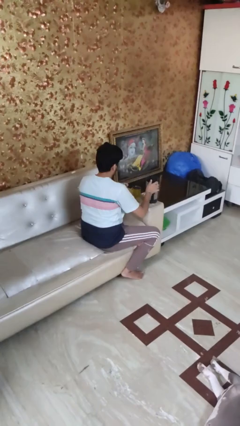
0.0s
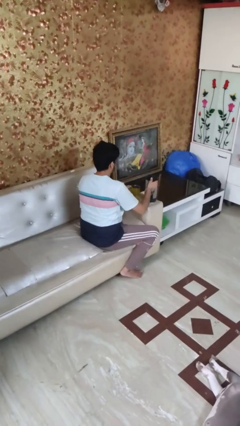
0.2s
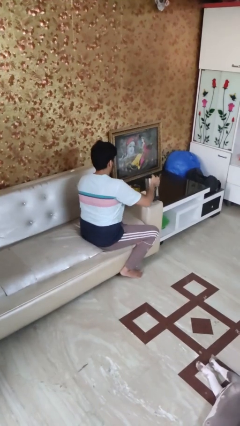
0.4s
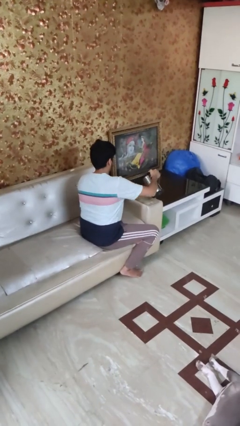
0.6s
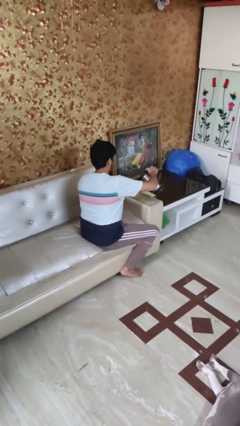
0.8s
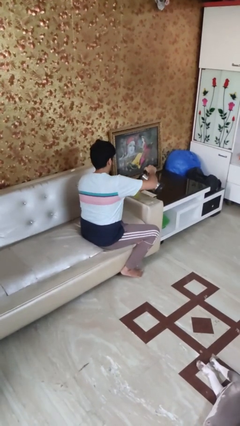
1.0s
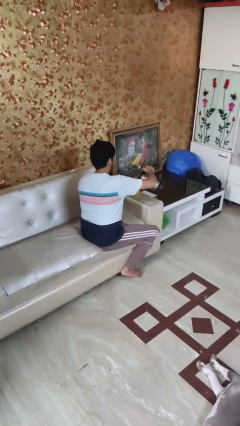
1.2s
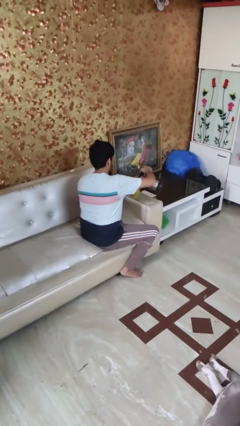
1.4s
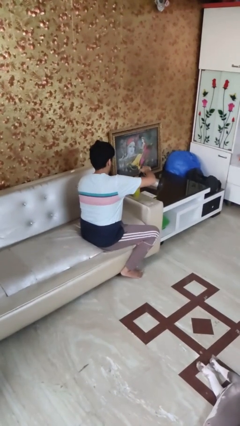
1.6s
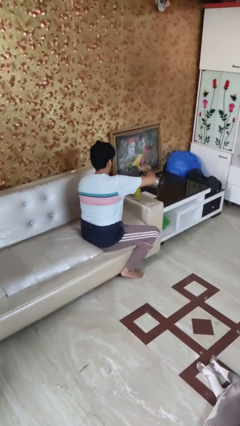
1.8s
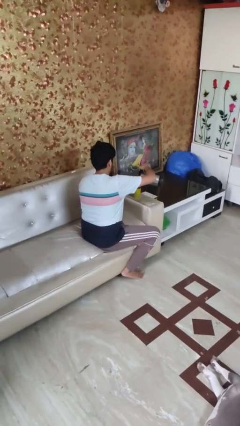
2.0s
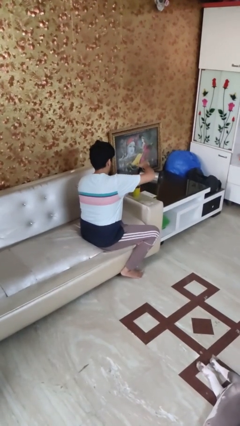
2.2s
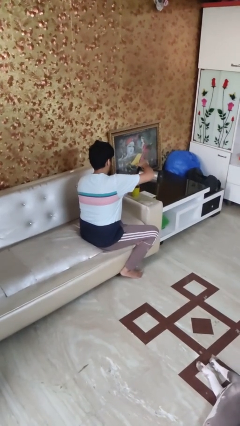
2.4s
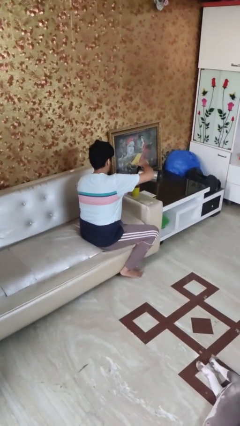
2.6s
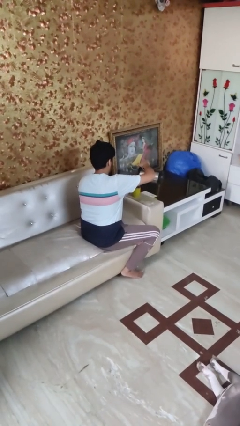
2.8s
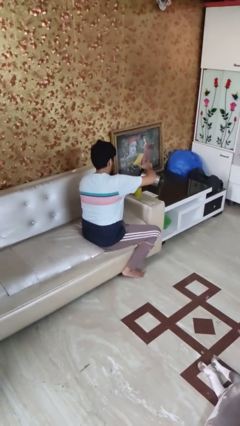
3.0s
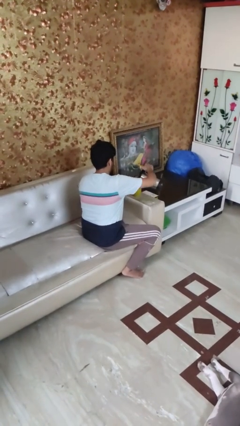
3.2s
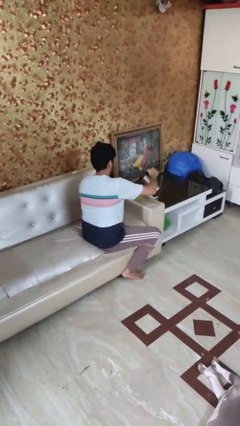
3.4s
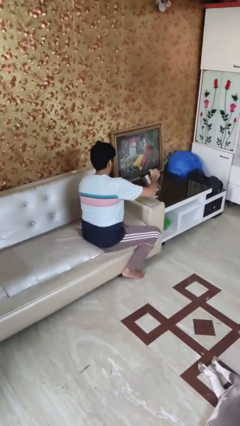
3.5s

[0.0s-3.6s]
person pours coffee into mug

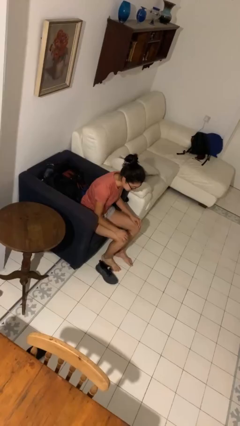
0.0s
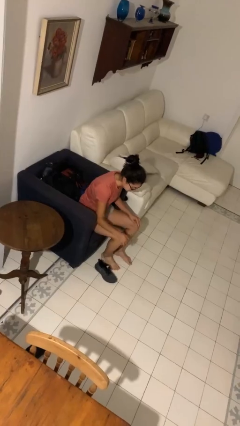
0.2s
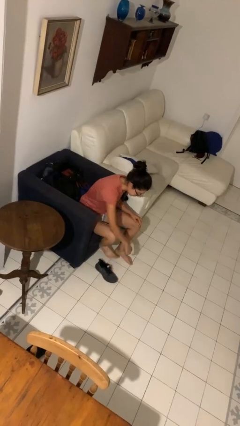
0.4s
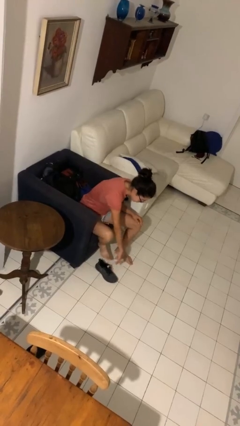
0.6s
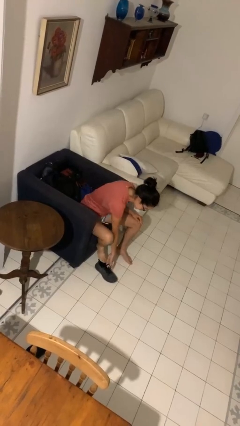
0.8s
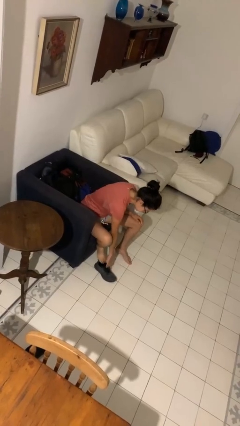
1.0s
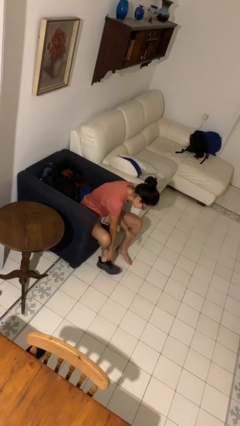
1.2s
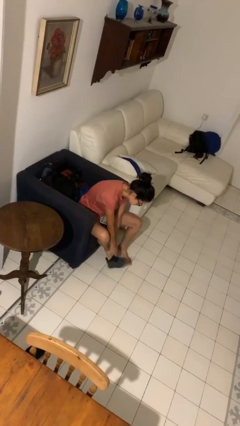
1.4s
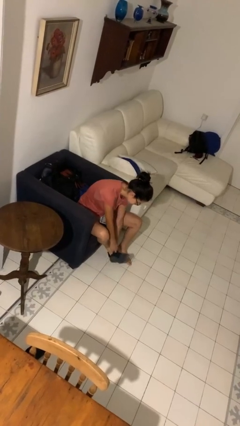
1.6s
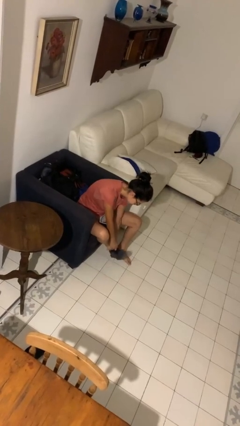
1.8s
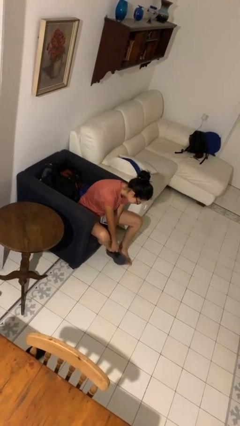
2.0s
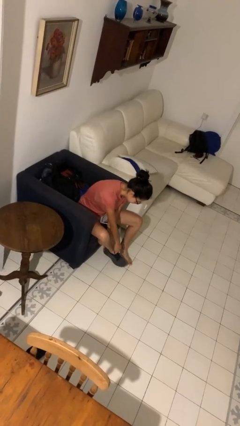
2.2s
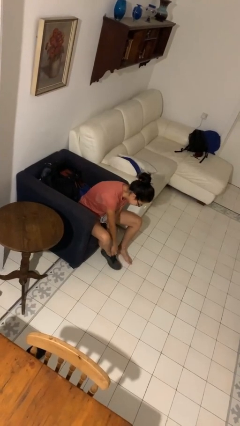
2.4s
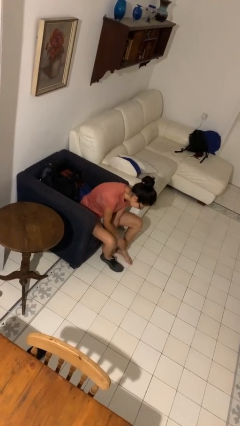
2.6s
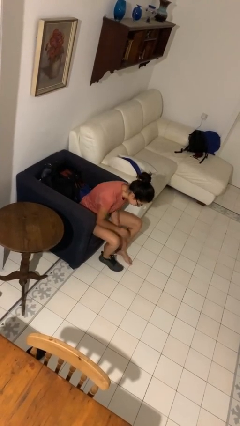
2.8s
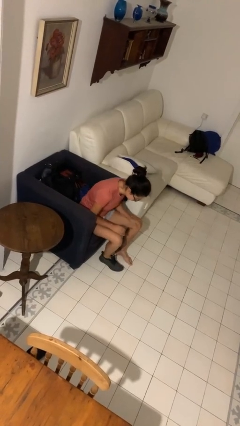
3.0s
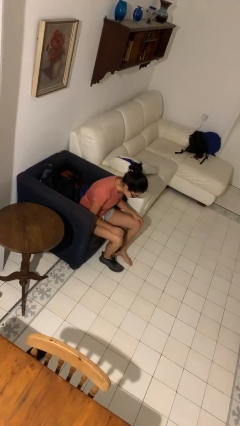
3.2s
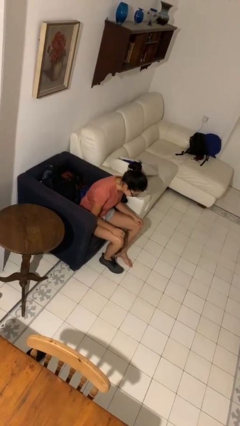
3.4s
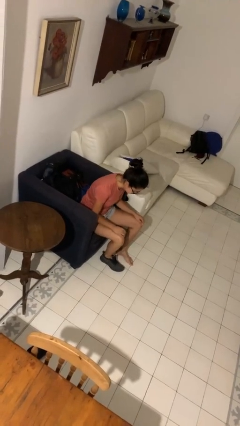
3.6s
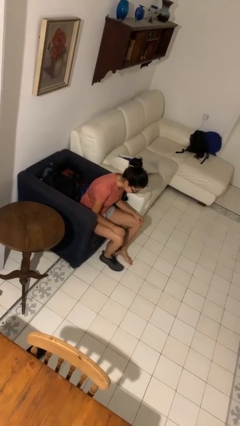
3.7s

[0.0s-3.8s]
person puts on shoes

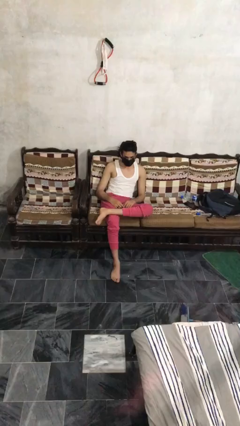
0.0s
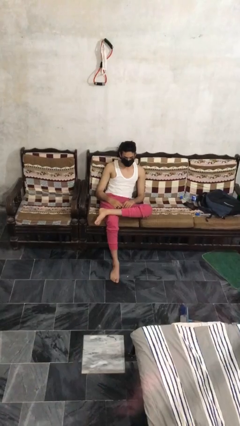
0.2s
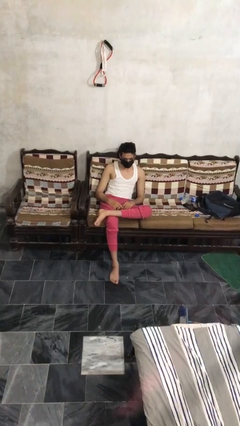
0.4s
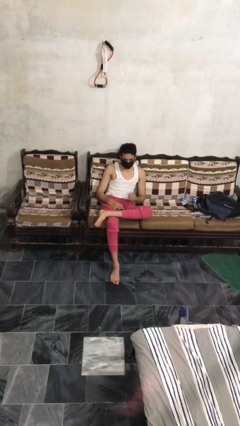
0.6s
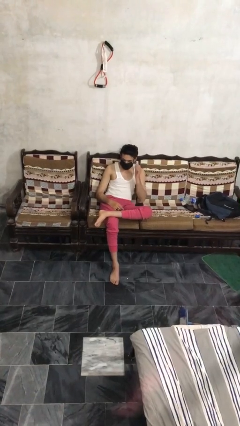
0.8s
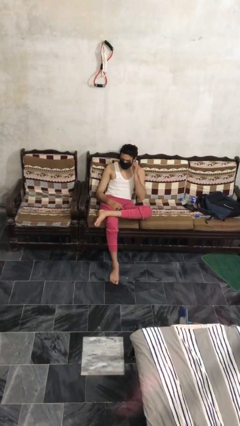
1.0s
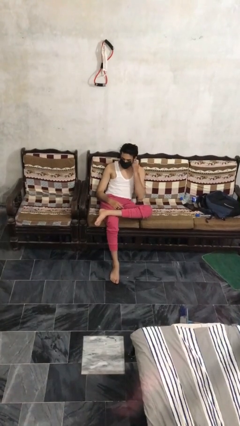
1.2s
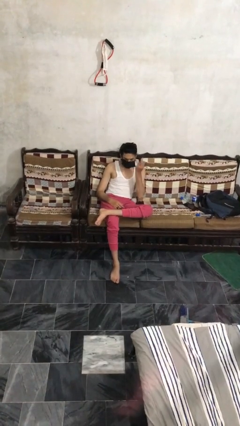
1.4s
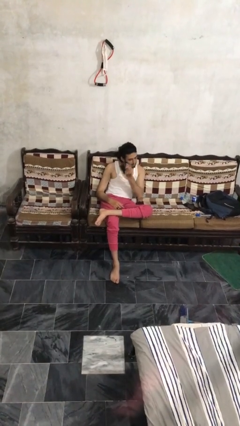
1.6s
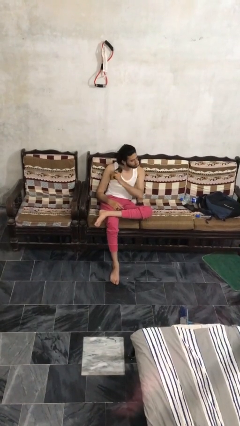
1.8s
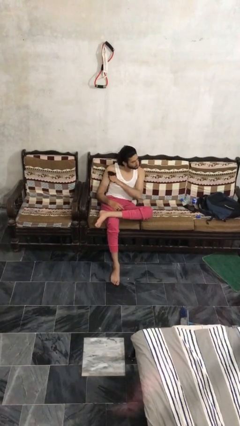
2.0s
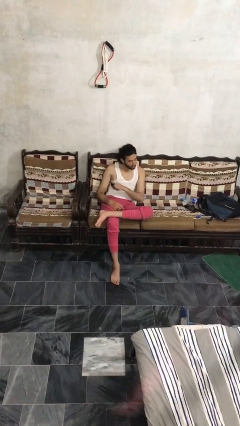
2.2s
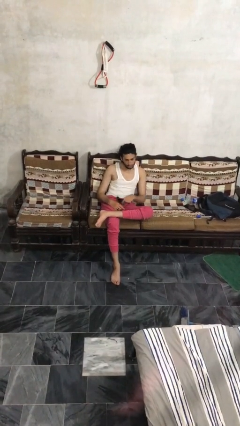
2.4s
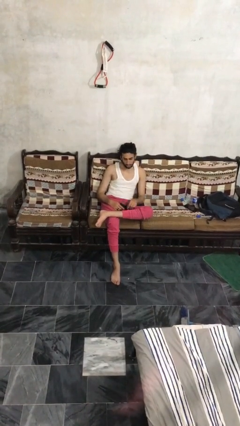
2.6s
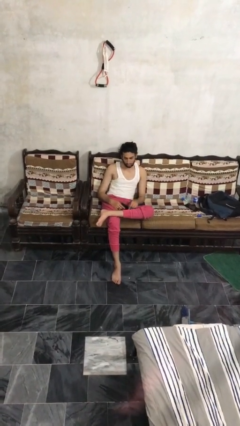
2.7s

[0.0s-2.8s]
person takes off facemask

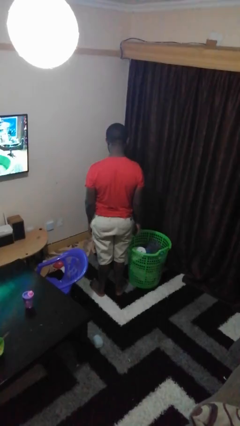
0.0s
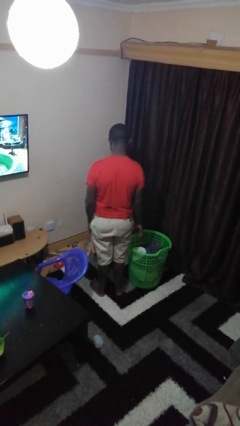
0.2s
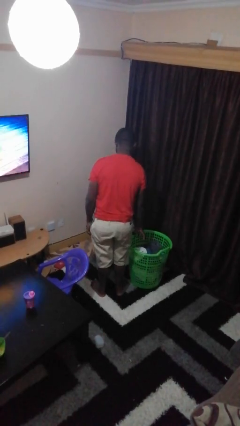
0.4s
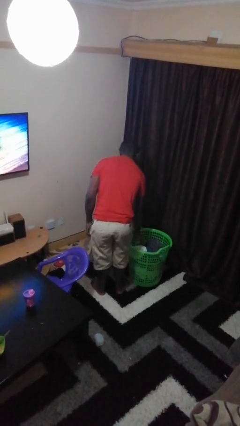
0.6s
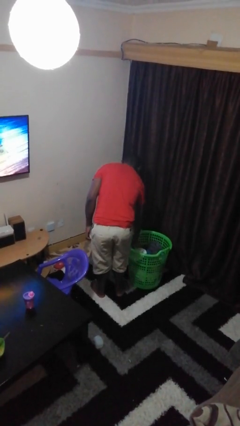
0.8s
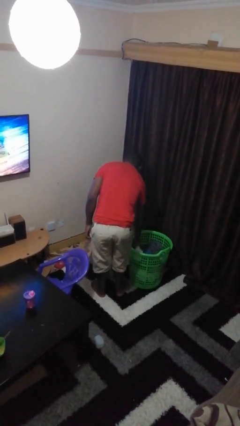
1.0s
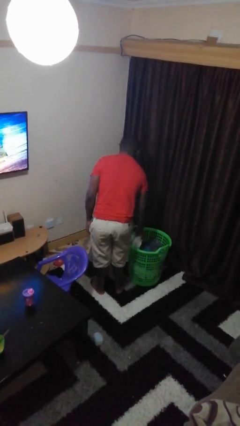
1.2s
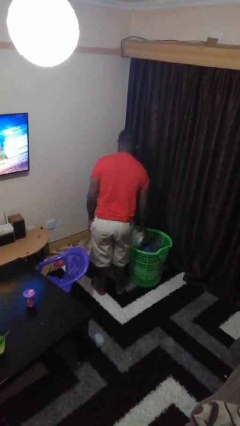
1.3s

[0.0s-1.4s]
person takes object from basket

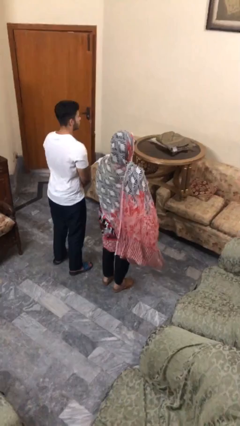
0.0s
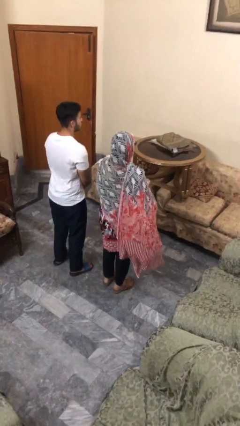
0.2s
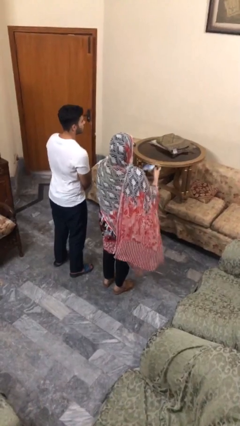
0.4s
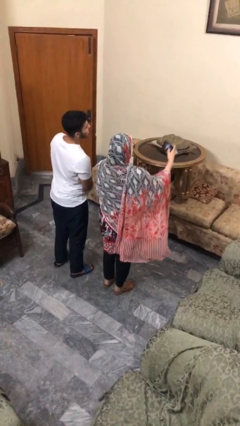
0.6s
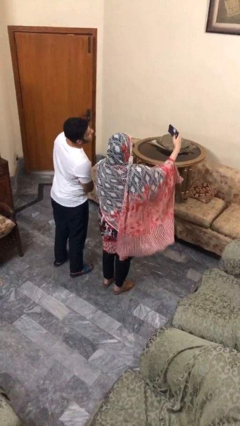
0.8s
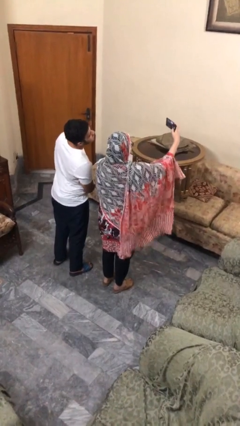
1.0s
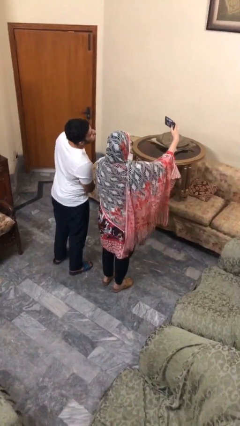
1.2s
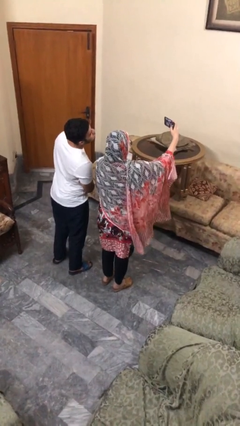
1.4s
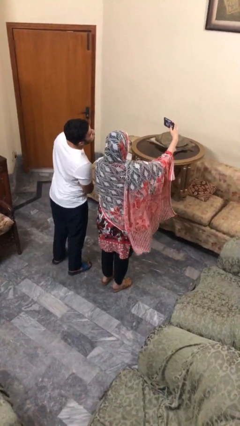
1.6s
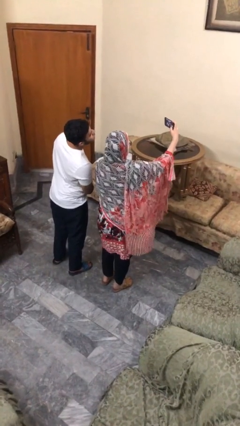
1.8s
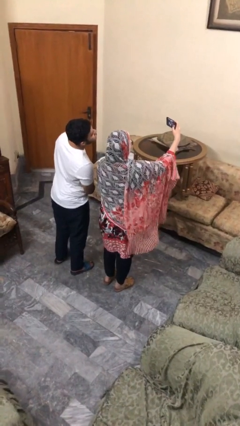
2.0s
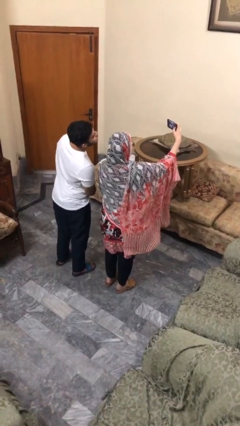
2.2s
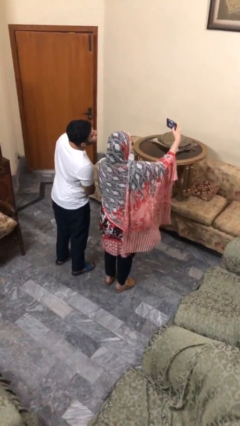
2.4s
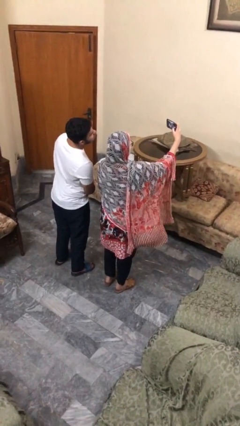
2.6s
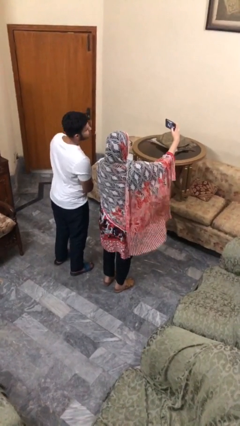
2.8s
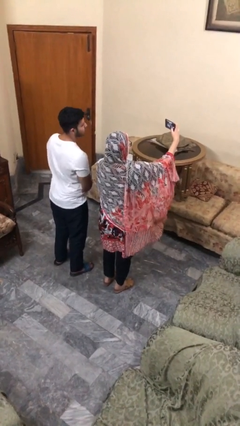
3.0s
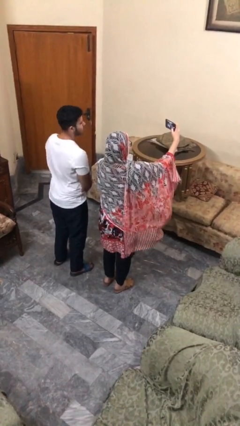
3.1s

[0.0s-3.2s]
person takes selfie with person

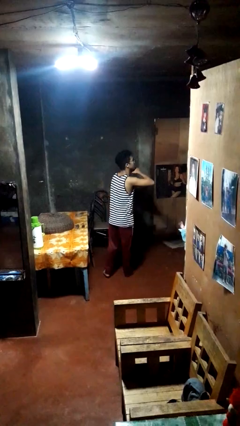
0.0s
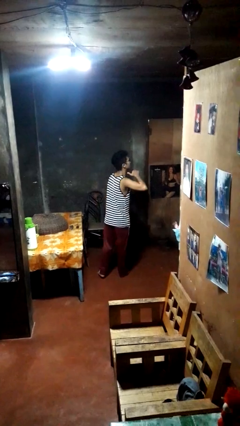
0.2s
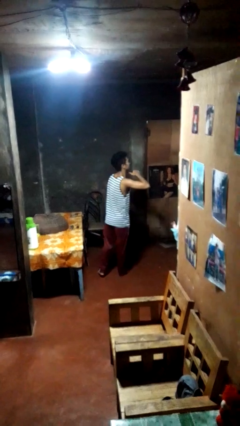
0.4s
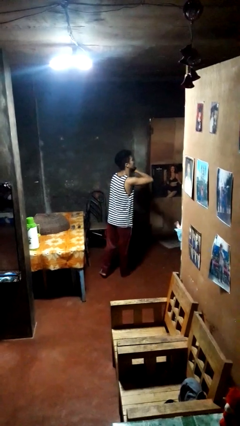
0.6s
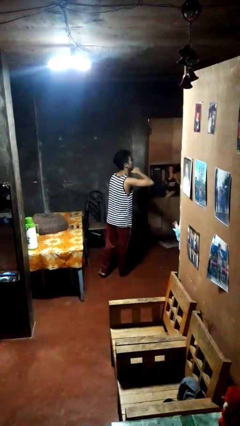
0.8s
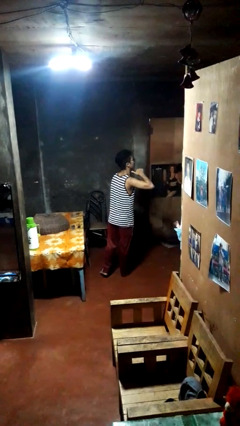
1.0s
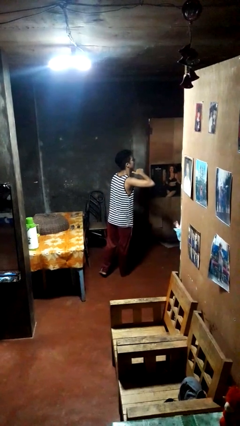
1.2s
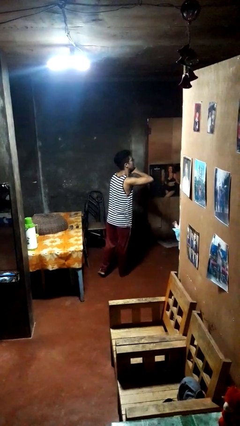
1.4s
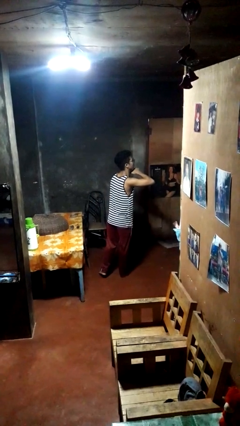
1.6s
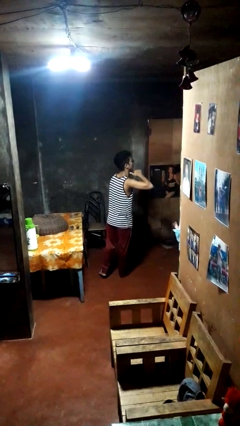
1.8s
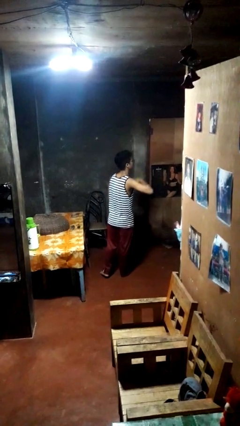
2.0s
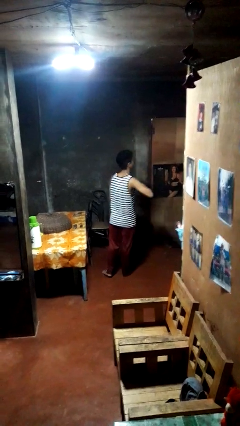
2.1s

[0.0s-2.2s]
person gestures cut

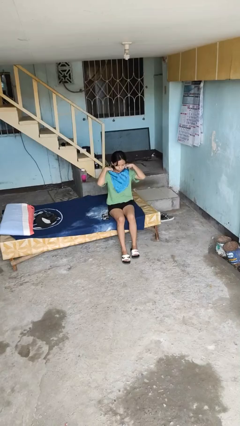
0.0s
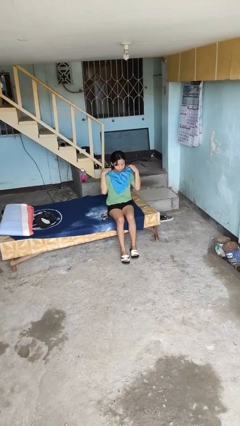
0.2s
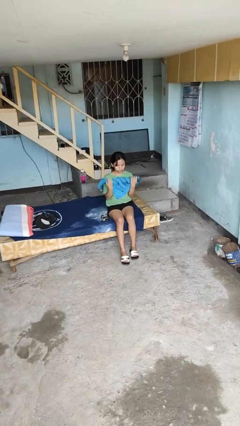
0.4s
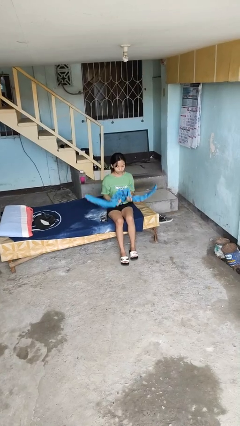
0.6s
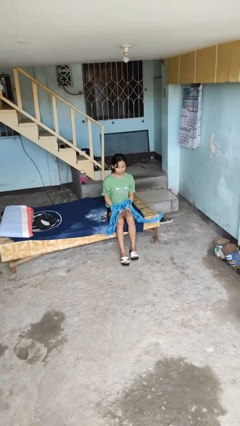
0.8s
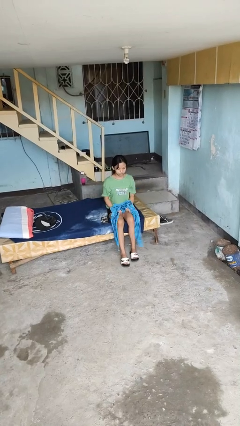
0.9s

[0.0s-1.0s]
person takes off scarf
